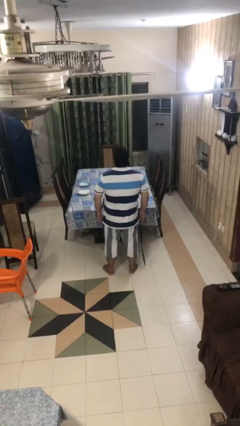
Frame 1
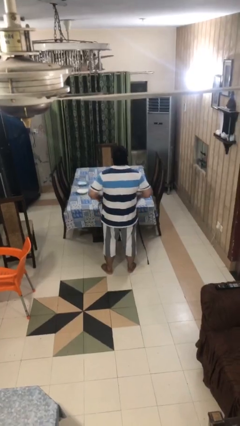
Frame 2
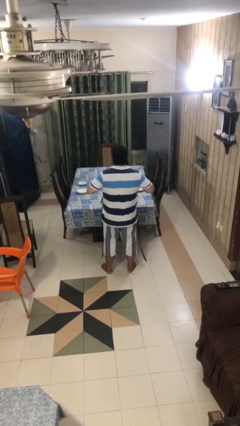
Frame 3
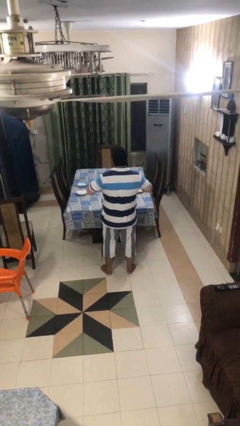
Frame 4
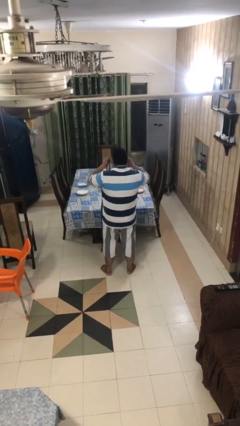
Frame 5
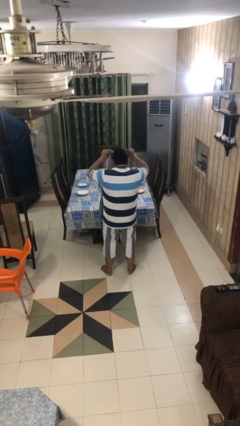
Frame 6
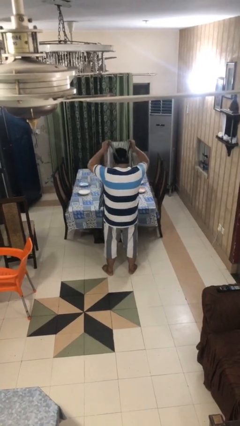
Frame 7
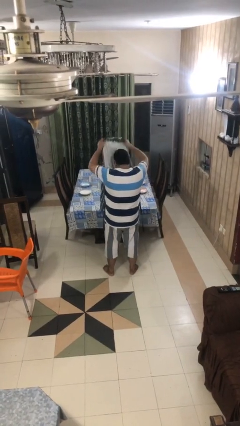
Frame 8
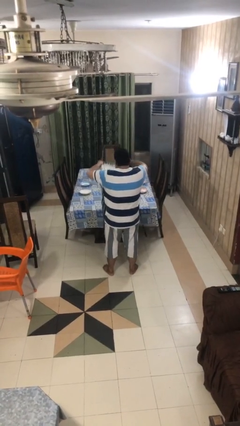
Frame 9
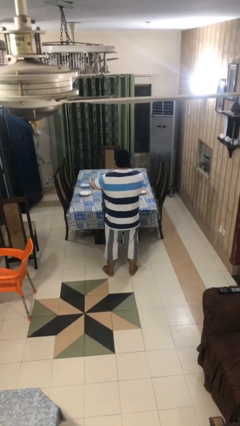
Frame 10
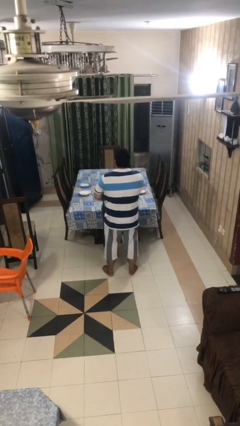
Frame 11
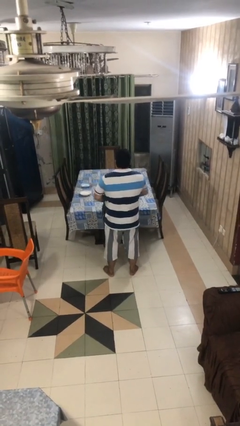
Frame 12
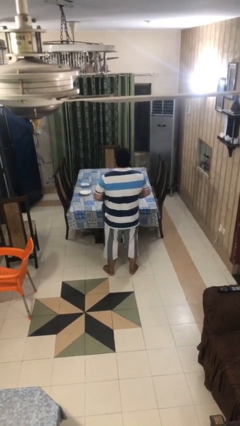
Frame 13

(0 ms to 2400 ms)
person takes off apron

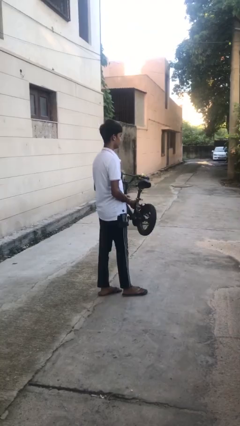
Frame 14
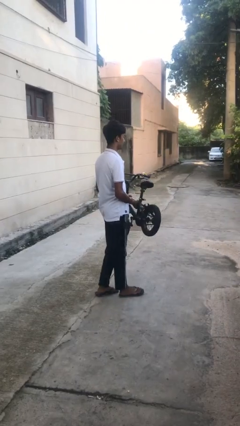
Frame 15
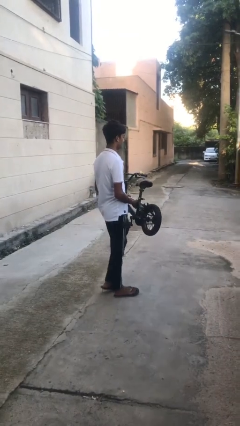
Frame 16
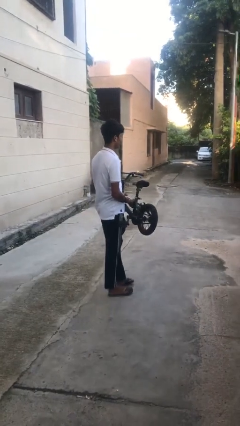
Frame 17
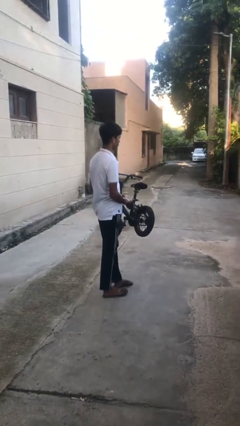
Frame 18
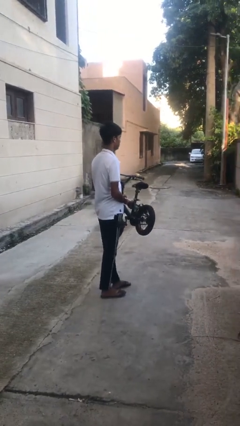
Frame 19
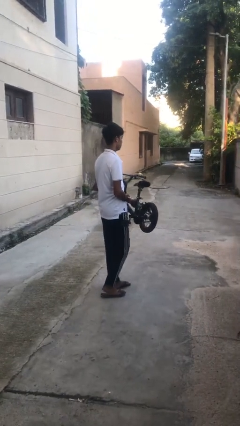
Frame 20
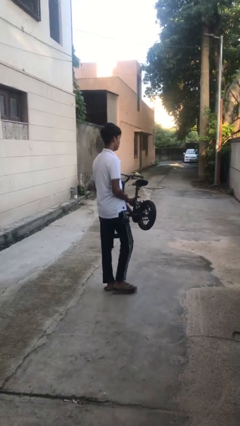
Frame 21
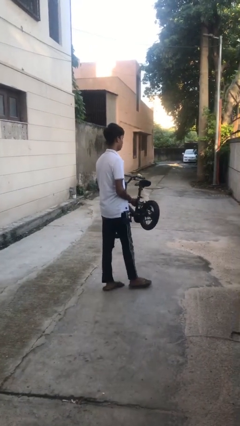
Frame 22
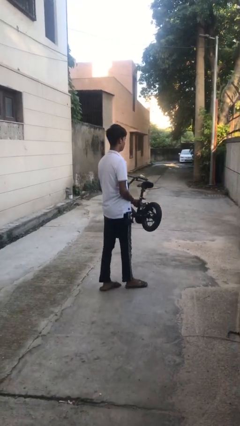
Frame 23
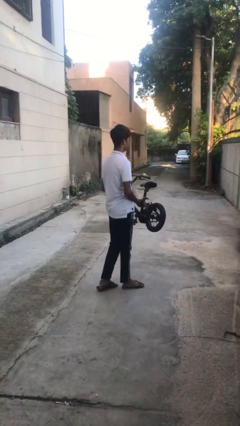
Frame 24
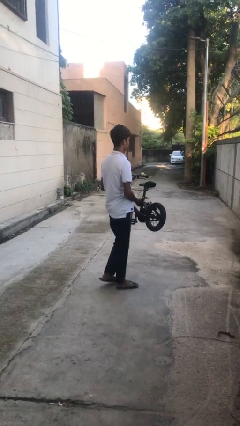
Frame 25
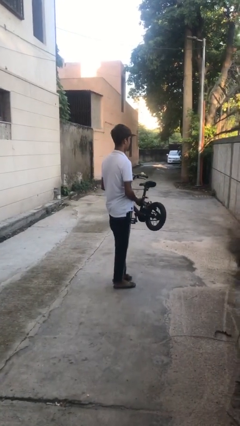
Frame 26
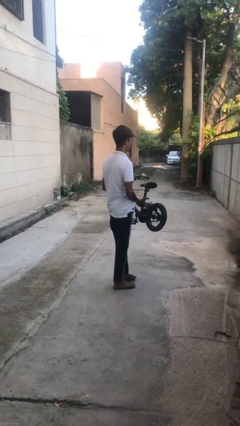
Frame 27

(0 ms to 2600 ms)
person carries bicycle

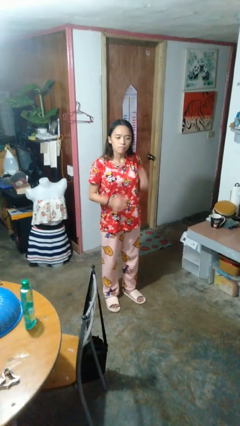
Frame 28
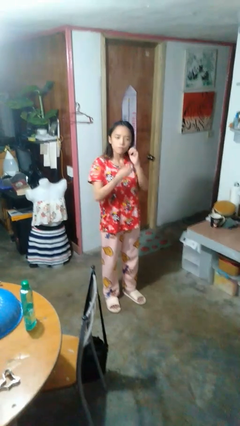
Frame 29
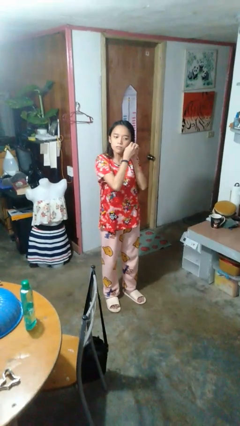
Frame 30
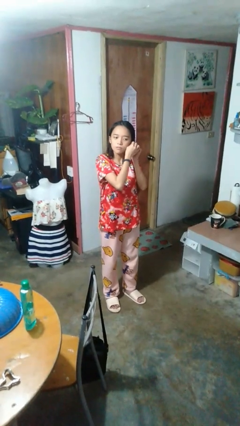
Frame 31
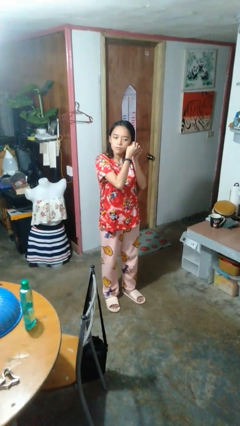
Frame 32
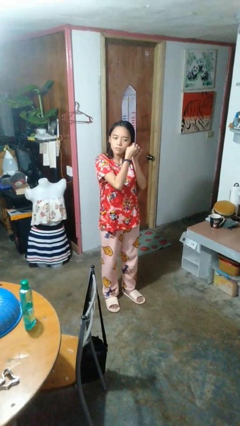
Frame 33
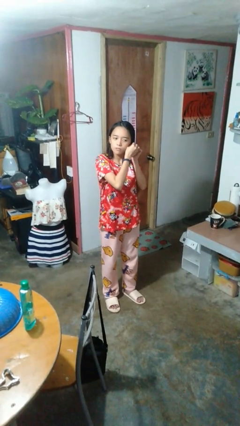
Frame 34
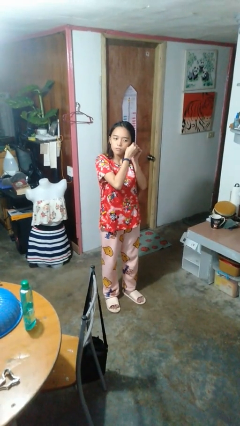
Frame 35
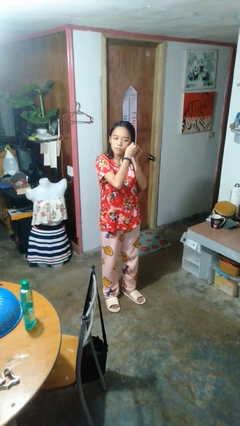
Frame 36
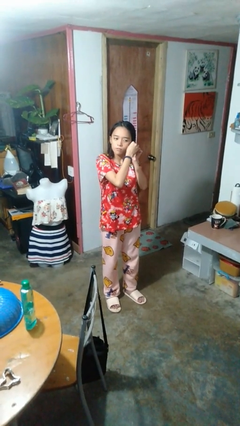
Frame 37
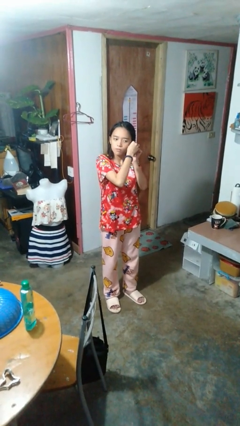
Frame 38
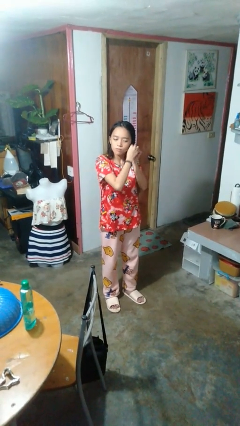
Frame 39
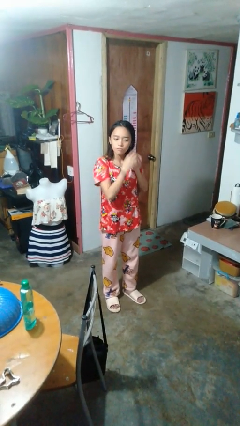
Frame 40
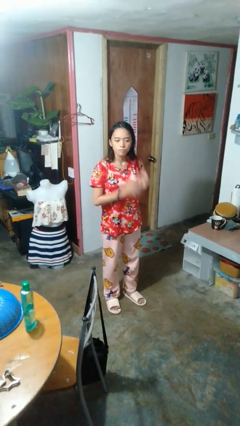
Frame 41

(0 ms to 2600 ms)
person puts on earrings

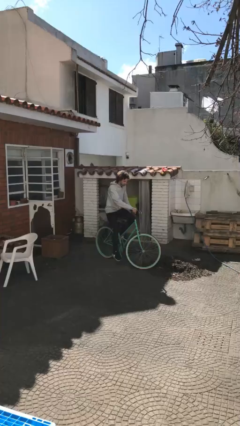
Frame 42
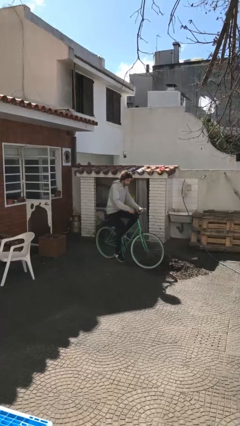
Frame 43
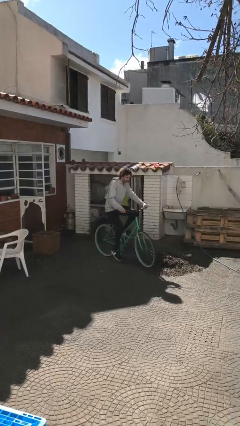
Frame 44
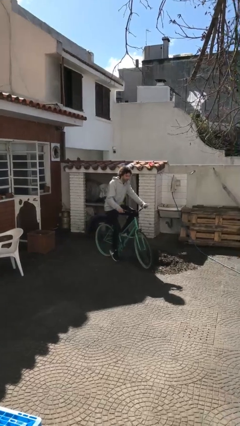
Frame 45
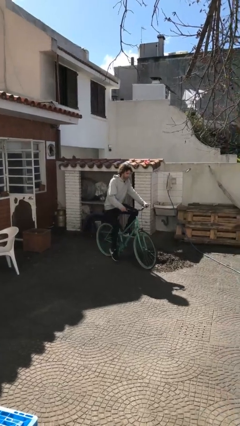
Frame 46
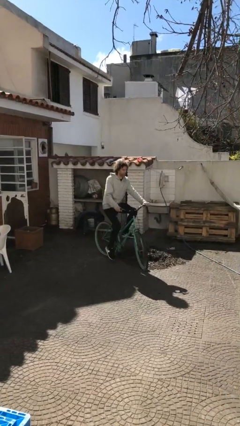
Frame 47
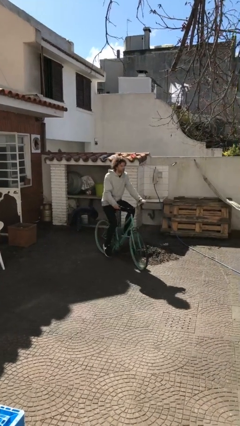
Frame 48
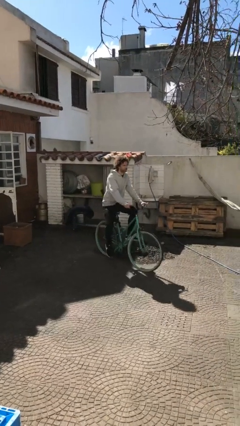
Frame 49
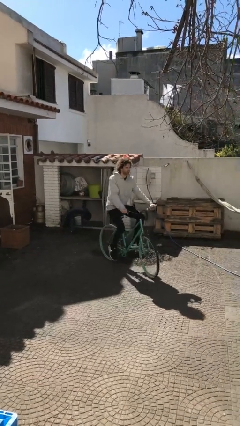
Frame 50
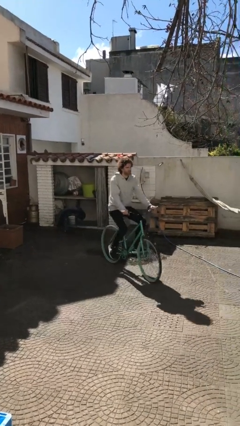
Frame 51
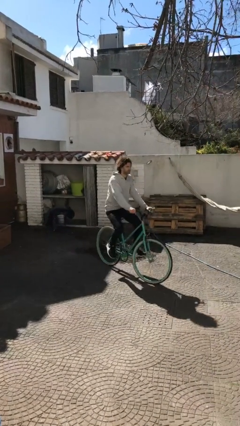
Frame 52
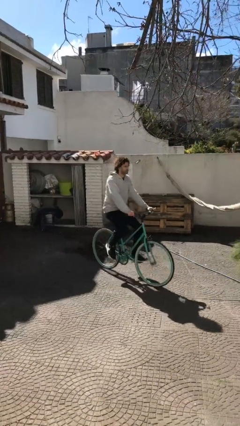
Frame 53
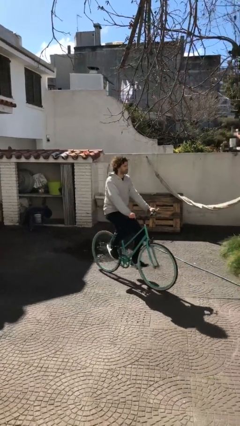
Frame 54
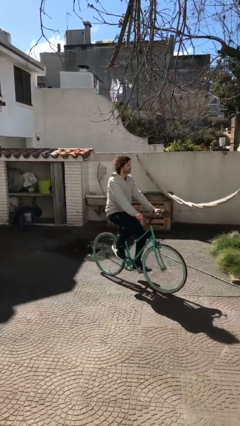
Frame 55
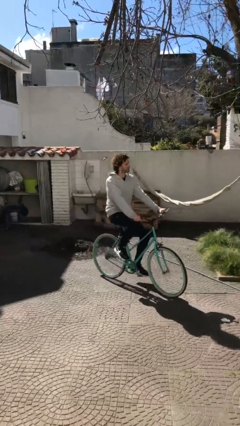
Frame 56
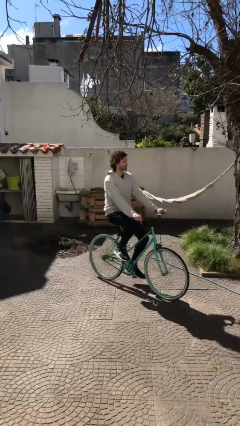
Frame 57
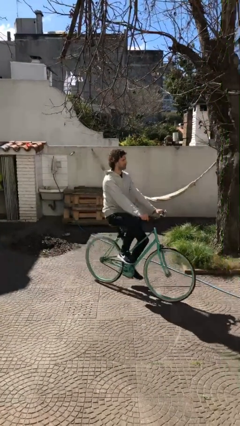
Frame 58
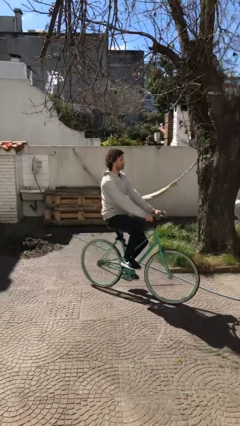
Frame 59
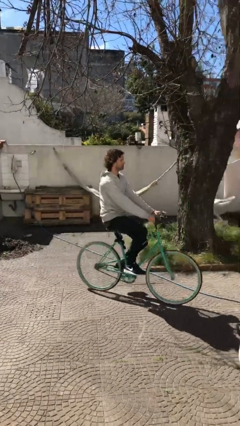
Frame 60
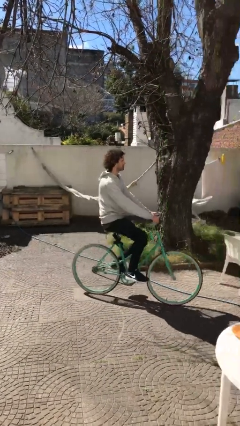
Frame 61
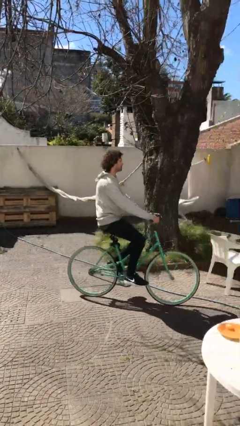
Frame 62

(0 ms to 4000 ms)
person rides bicycle

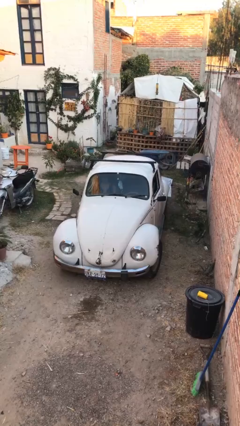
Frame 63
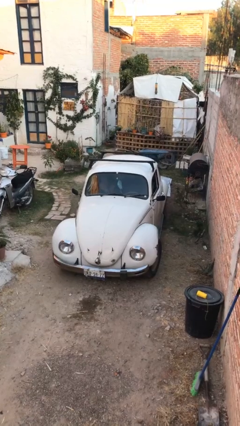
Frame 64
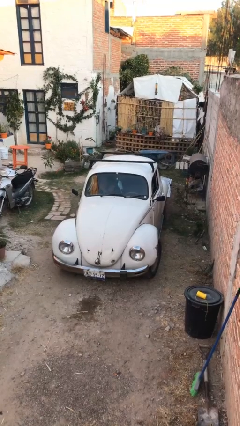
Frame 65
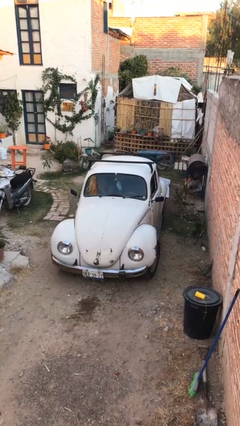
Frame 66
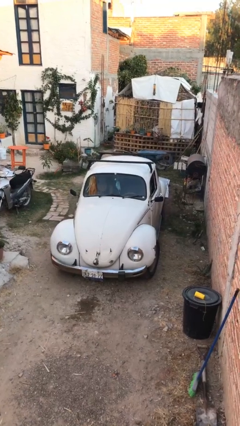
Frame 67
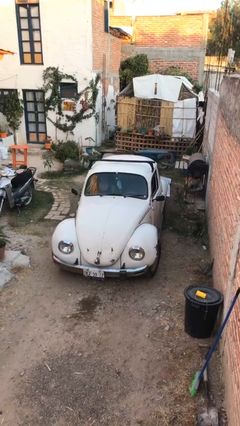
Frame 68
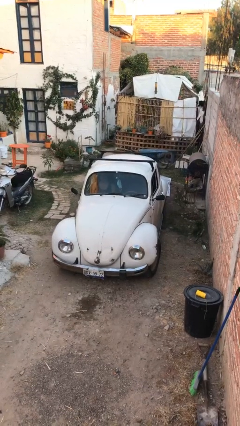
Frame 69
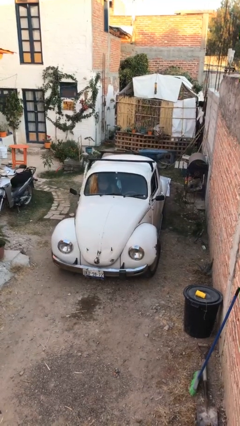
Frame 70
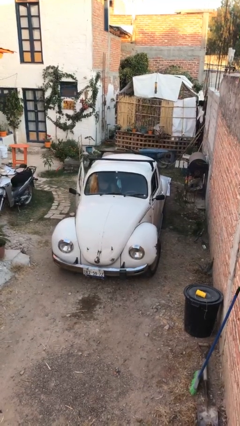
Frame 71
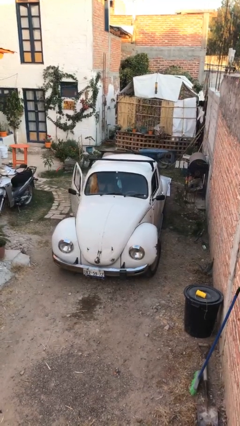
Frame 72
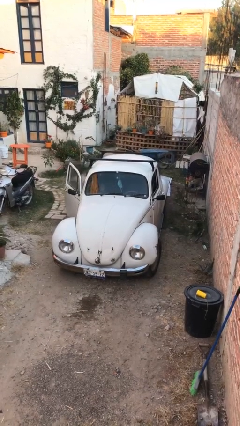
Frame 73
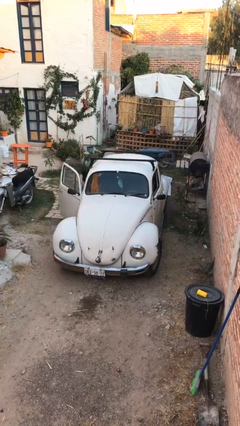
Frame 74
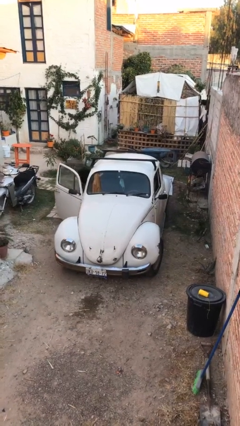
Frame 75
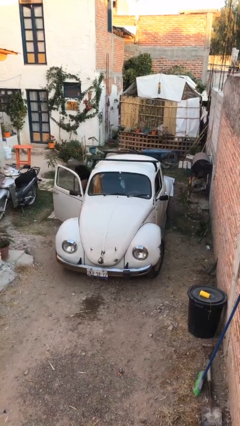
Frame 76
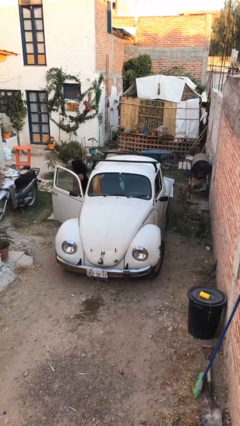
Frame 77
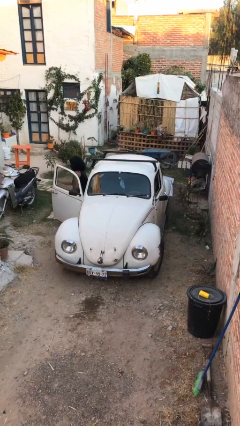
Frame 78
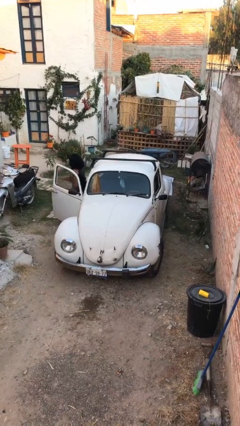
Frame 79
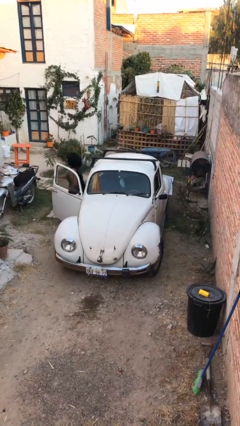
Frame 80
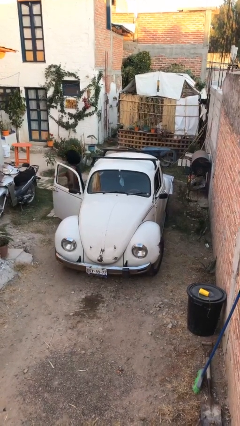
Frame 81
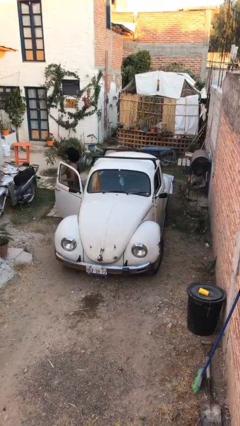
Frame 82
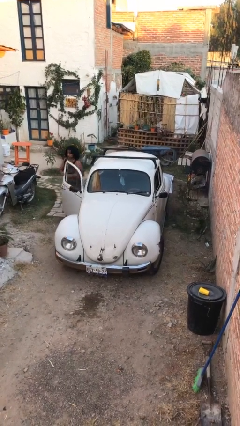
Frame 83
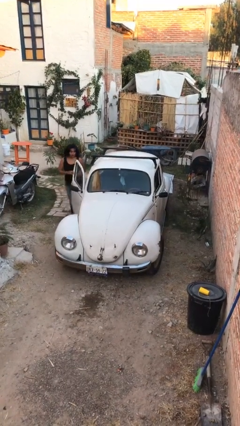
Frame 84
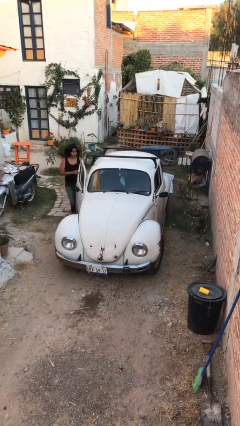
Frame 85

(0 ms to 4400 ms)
car drops off person

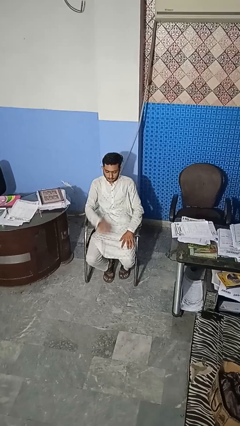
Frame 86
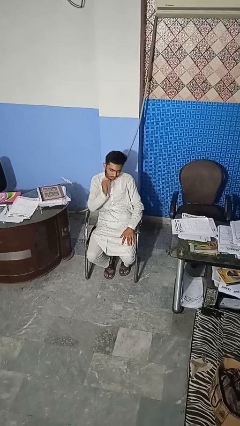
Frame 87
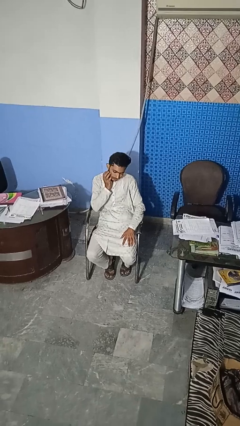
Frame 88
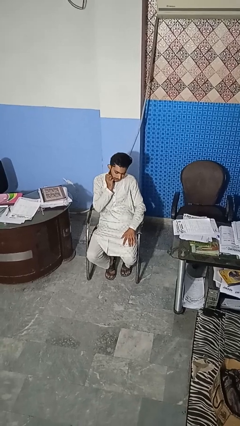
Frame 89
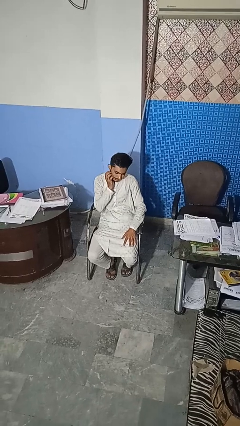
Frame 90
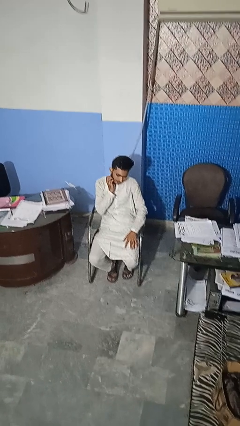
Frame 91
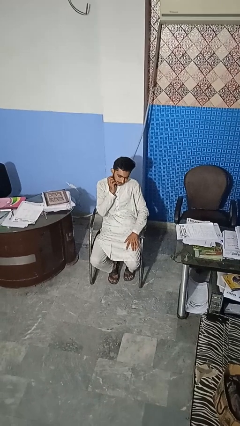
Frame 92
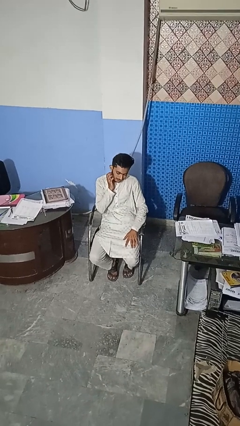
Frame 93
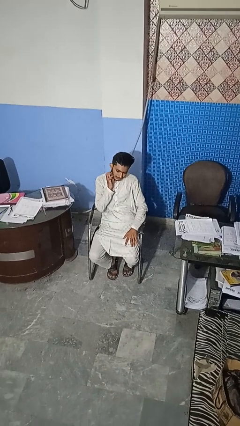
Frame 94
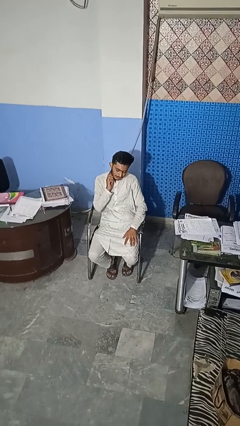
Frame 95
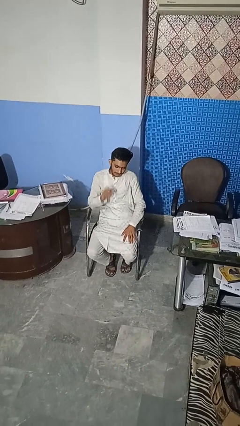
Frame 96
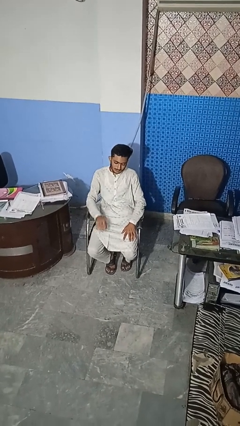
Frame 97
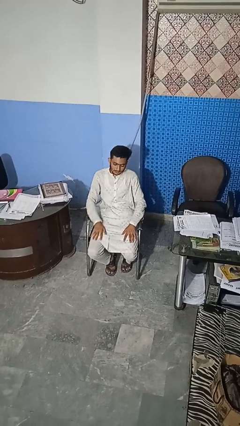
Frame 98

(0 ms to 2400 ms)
person scratches face
